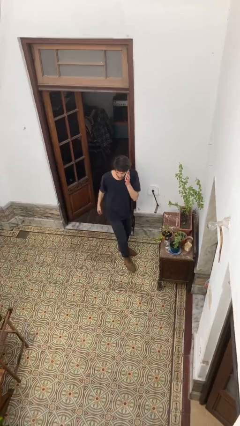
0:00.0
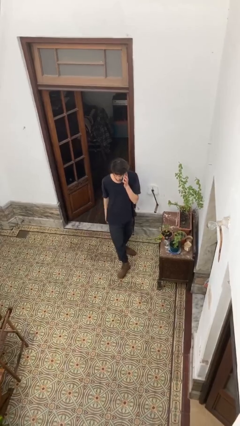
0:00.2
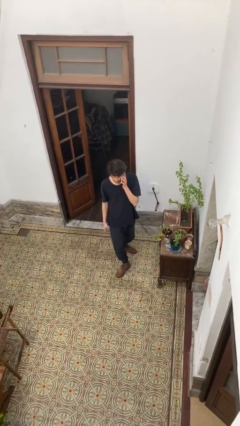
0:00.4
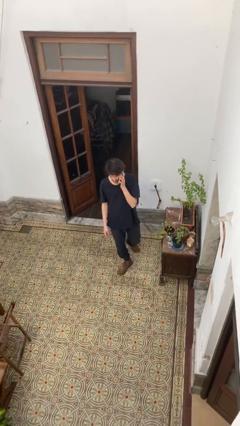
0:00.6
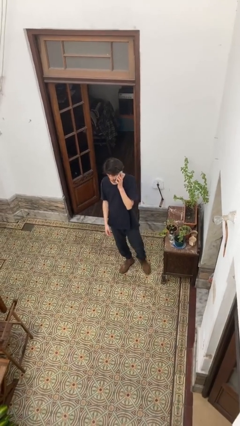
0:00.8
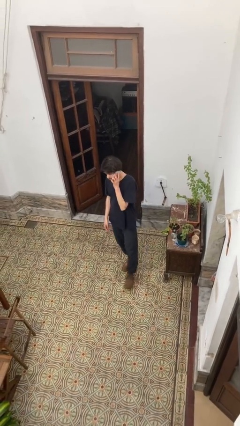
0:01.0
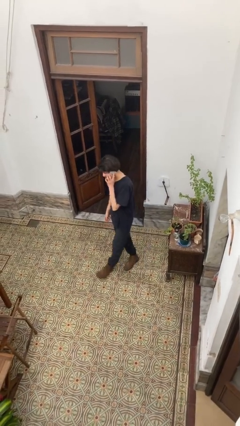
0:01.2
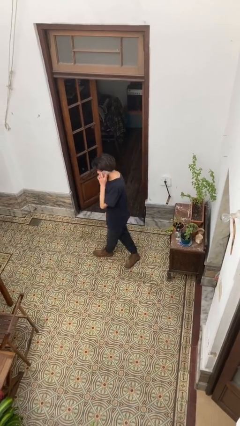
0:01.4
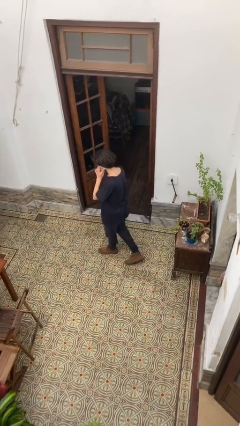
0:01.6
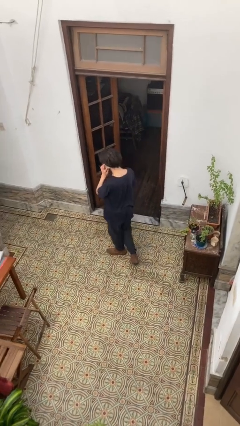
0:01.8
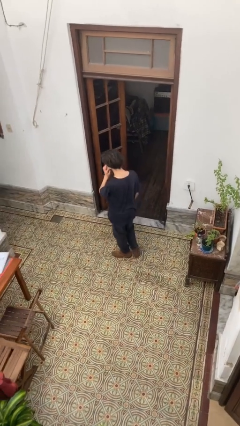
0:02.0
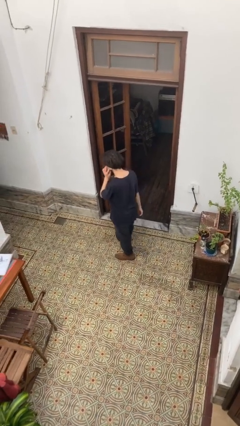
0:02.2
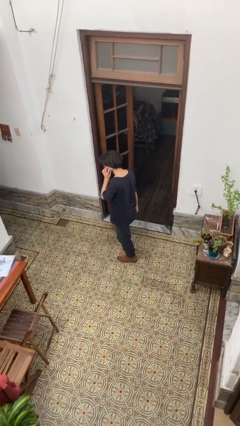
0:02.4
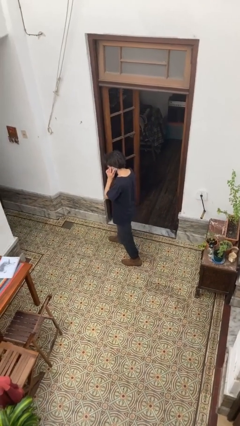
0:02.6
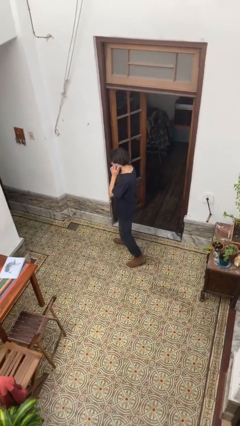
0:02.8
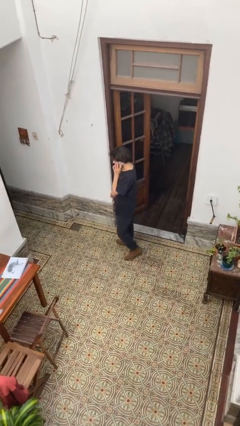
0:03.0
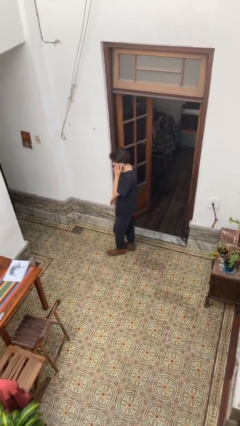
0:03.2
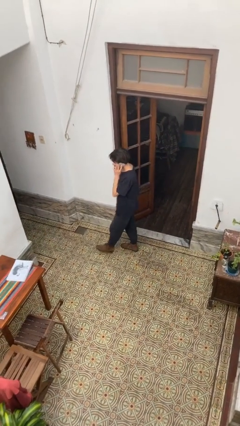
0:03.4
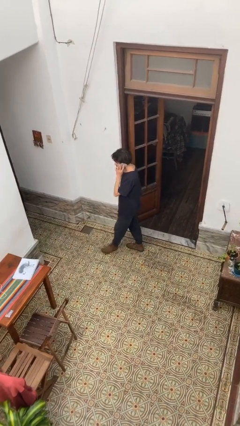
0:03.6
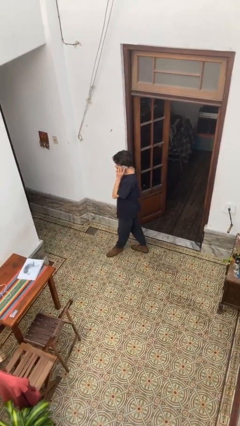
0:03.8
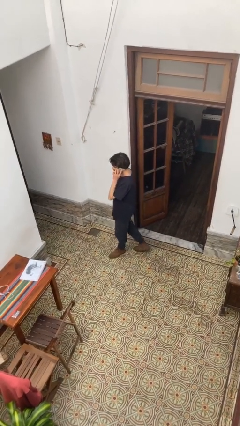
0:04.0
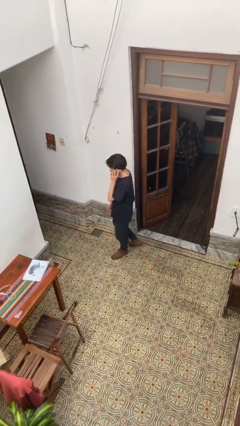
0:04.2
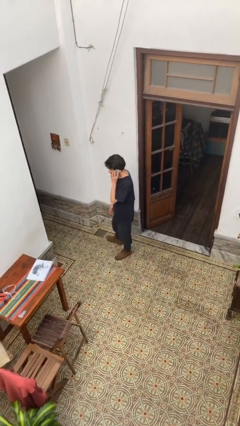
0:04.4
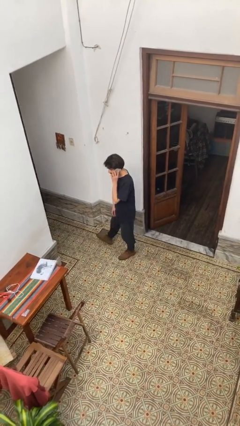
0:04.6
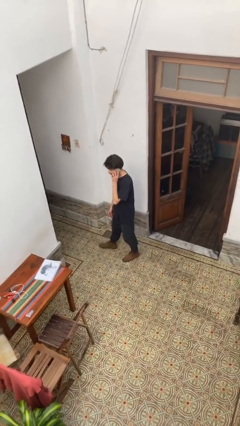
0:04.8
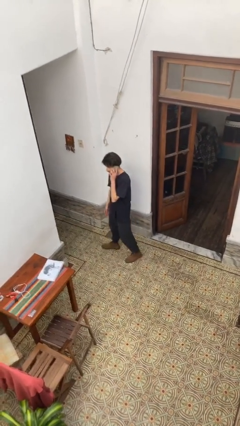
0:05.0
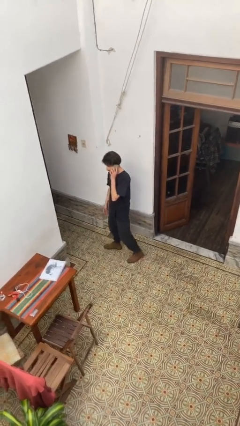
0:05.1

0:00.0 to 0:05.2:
person talks on phone

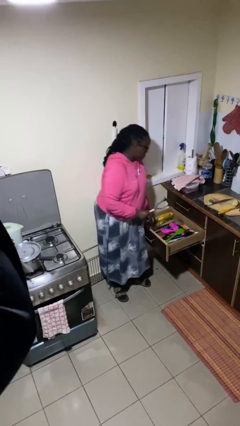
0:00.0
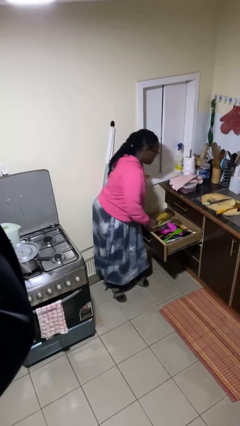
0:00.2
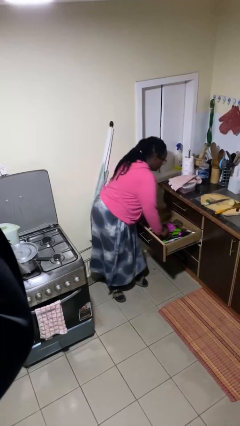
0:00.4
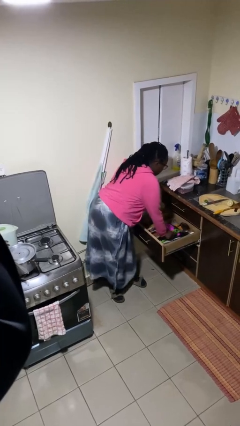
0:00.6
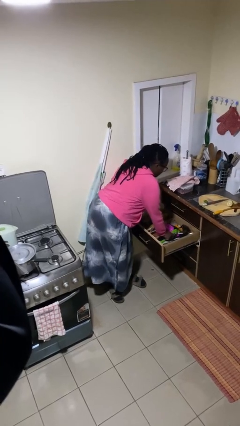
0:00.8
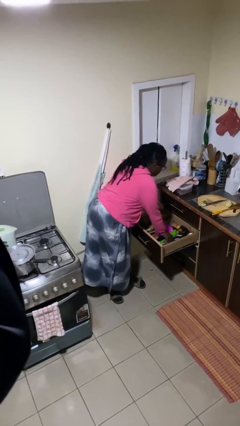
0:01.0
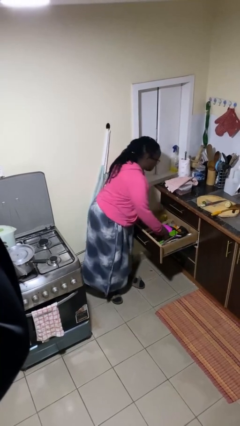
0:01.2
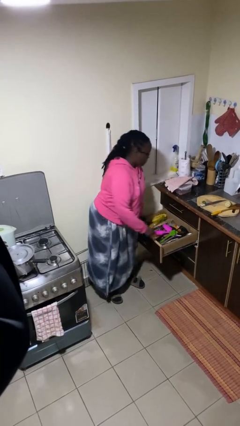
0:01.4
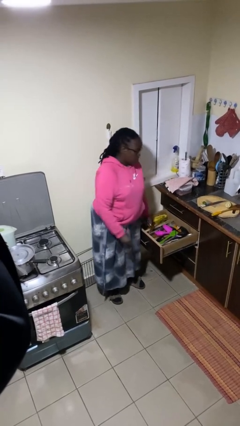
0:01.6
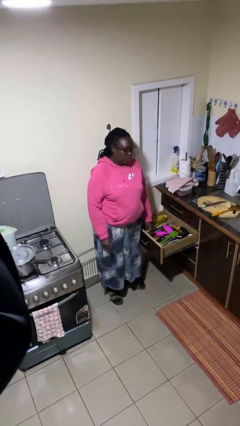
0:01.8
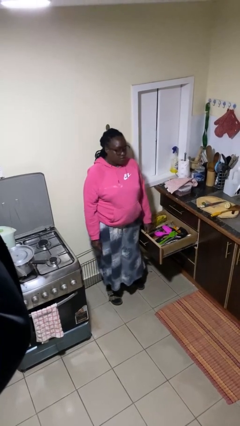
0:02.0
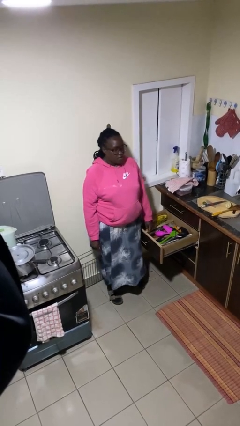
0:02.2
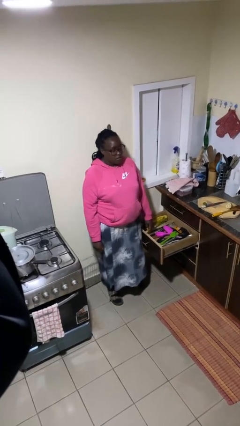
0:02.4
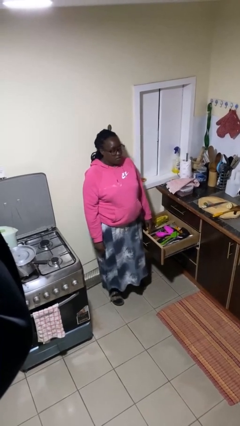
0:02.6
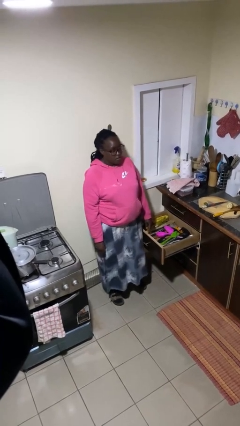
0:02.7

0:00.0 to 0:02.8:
person puts object into kitchen drawer

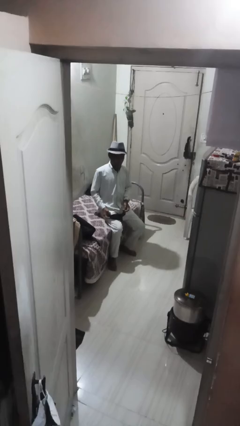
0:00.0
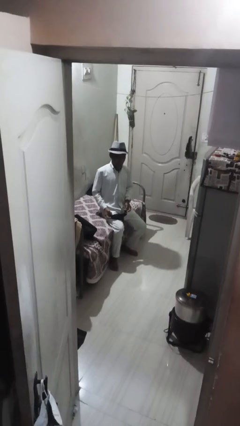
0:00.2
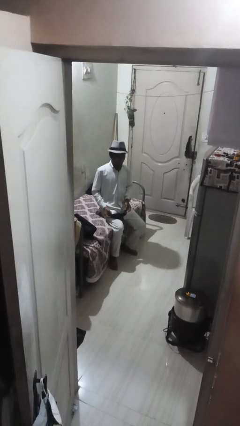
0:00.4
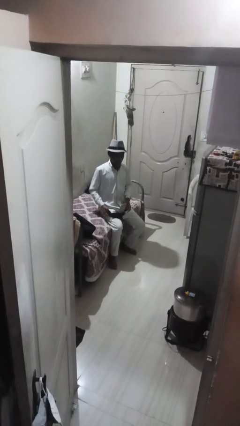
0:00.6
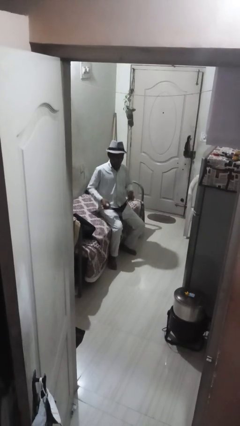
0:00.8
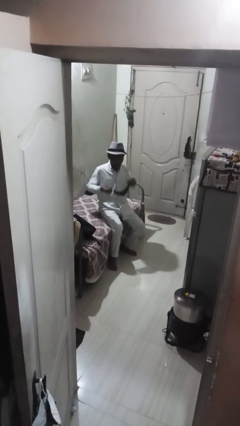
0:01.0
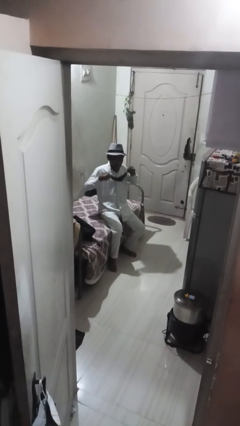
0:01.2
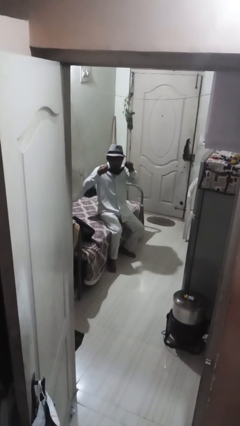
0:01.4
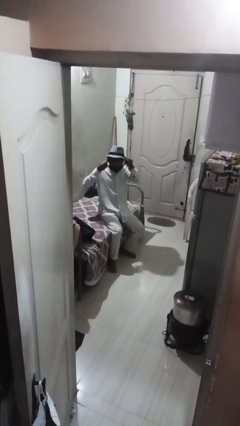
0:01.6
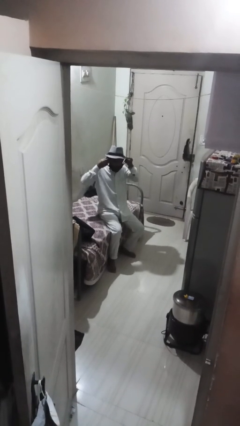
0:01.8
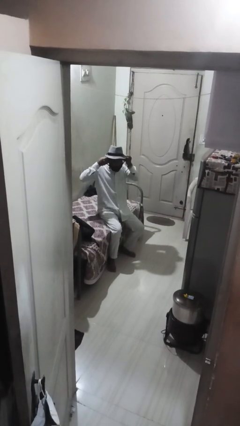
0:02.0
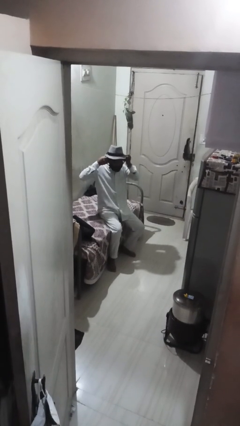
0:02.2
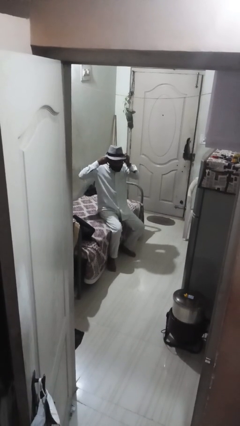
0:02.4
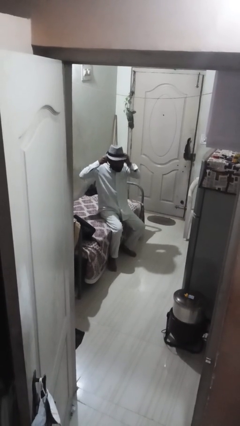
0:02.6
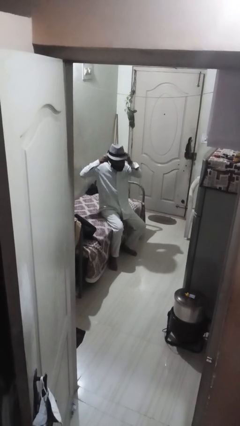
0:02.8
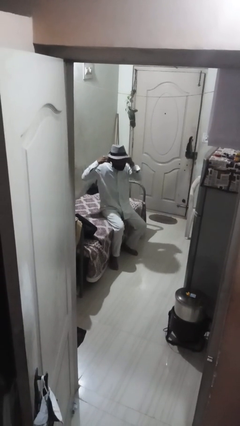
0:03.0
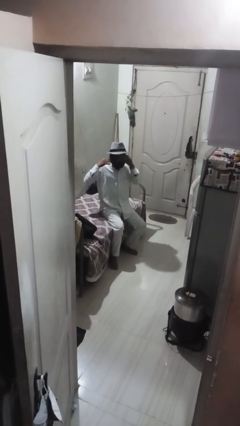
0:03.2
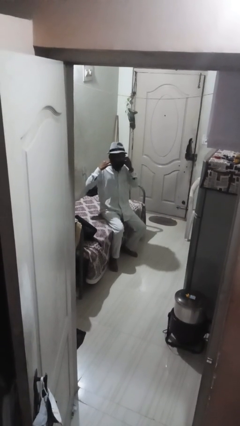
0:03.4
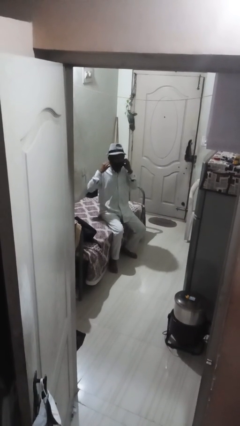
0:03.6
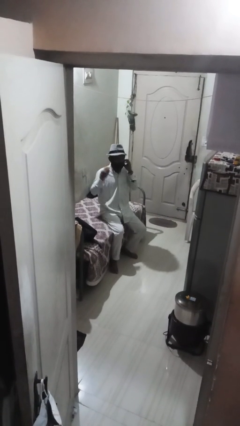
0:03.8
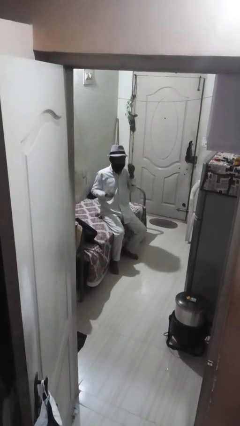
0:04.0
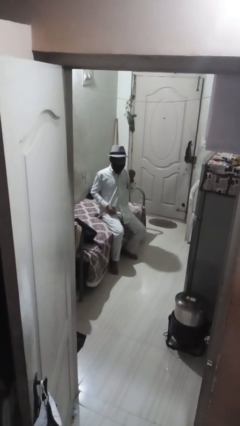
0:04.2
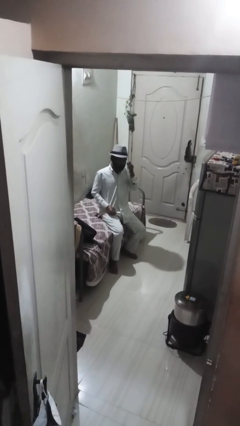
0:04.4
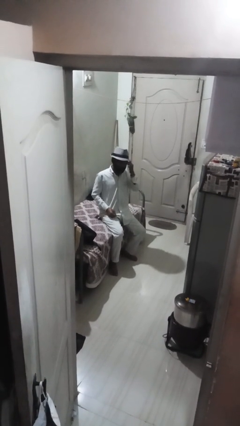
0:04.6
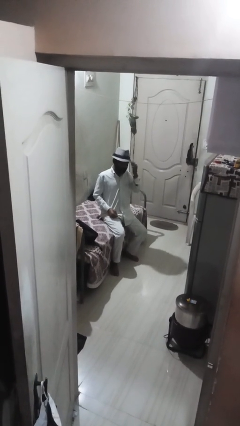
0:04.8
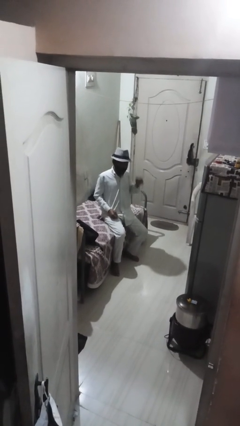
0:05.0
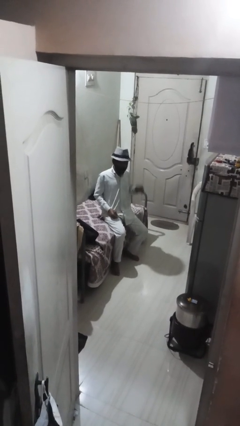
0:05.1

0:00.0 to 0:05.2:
person puts on facemask

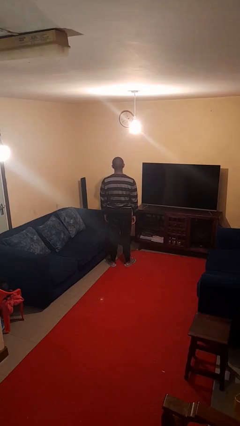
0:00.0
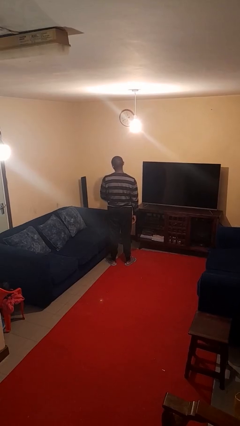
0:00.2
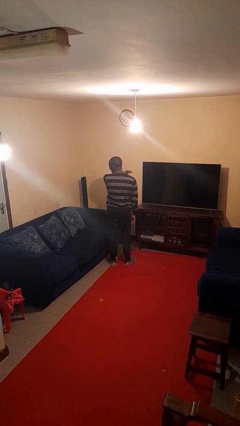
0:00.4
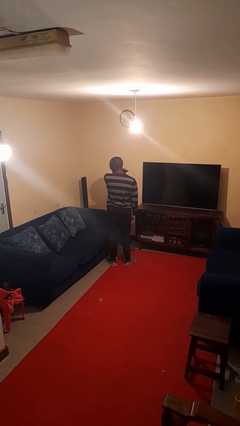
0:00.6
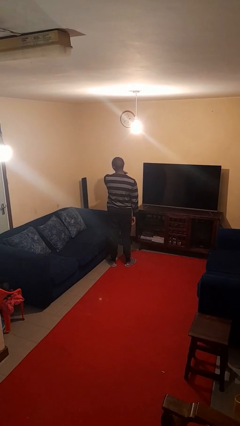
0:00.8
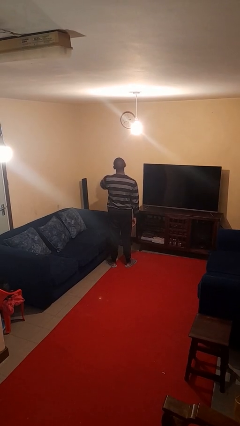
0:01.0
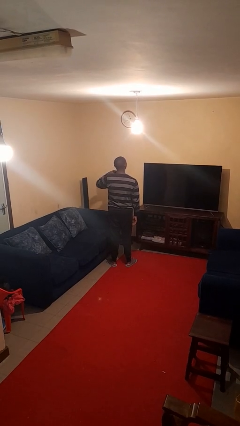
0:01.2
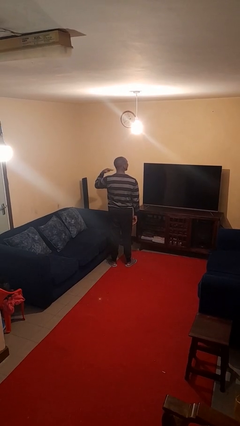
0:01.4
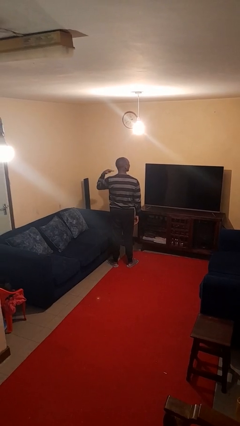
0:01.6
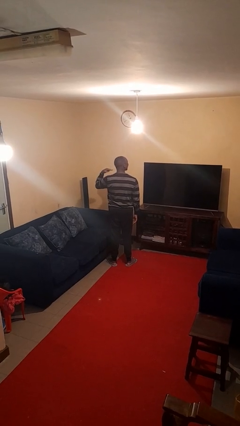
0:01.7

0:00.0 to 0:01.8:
person gestures cut

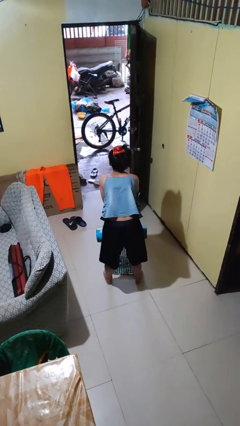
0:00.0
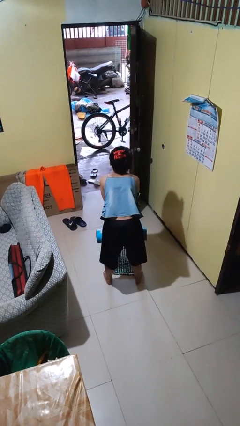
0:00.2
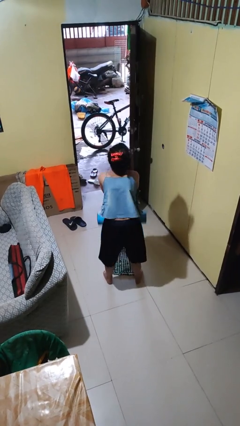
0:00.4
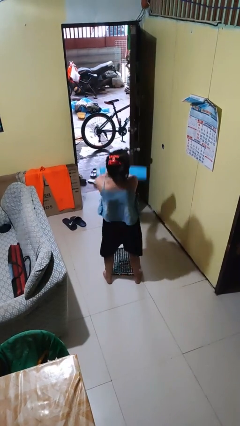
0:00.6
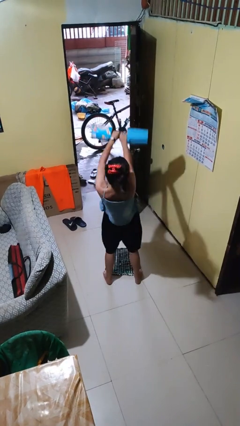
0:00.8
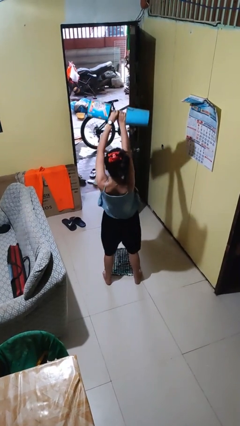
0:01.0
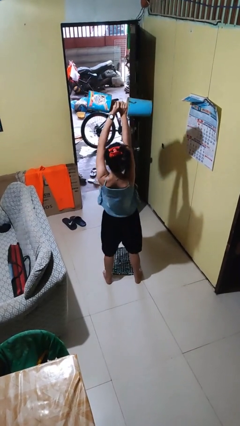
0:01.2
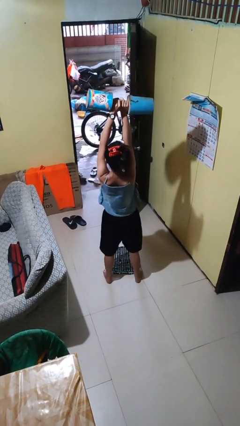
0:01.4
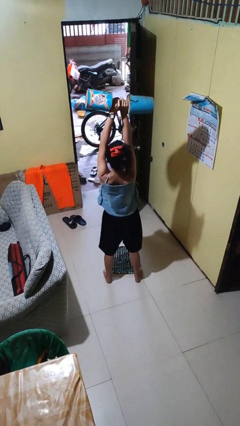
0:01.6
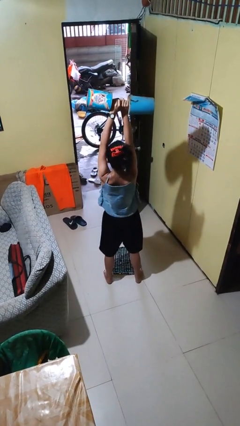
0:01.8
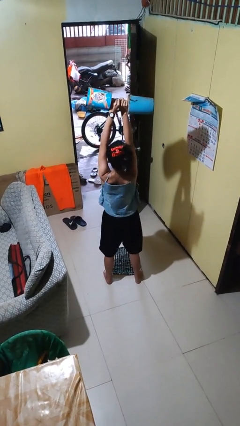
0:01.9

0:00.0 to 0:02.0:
person lifts dumbbells

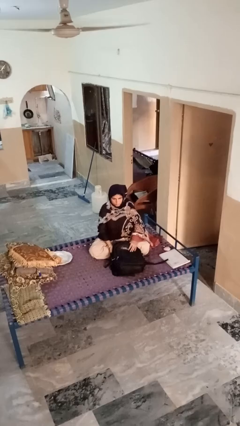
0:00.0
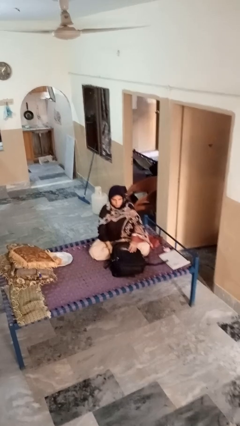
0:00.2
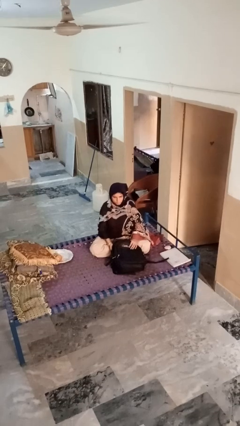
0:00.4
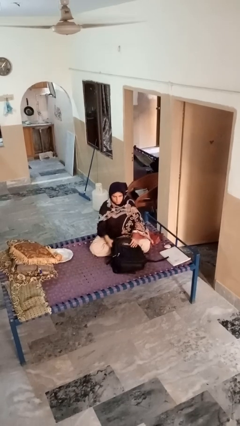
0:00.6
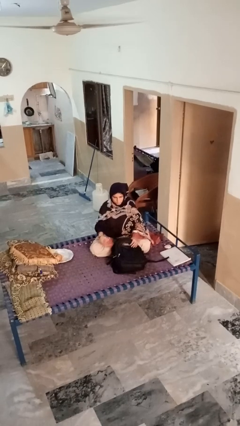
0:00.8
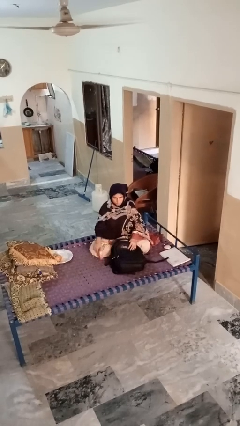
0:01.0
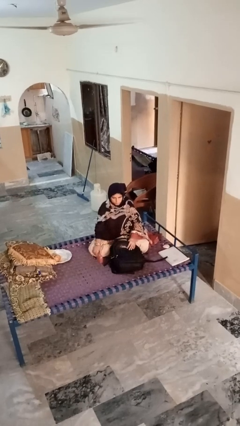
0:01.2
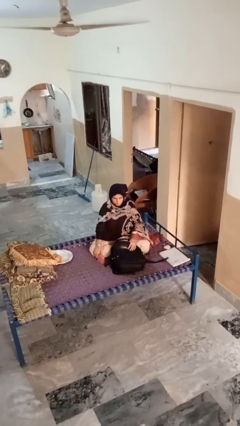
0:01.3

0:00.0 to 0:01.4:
person takes object from bag
